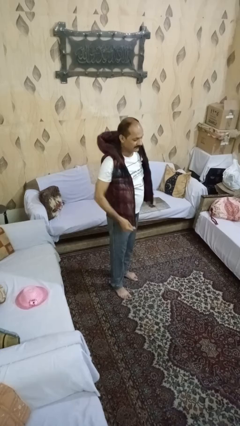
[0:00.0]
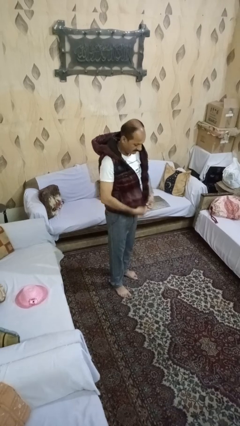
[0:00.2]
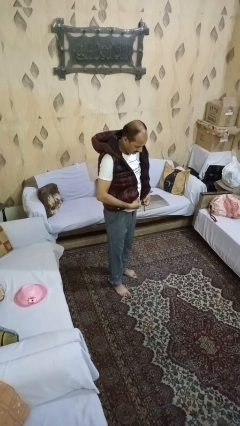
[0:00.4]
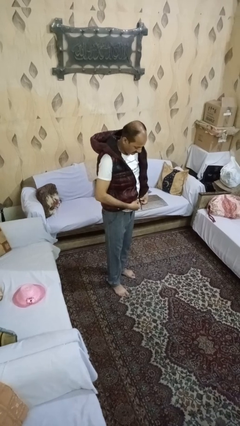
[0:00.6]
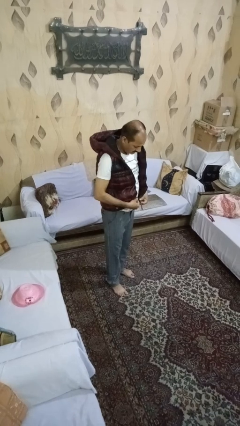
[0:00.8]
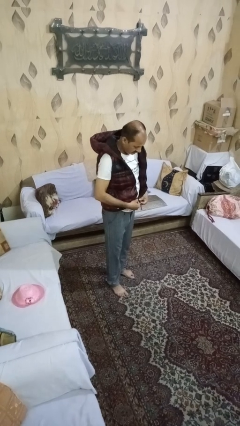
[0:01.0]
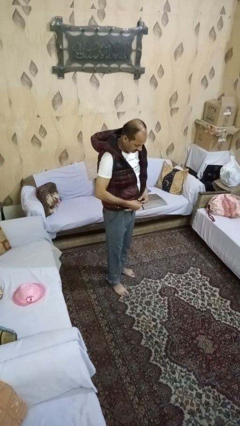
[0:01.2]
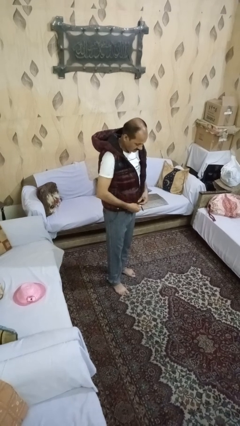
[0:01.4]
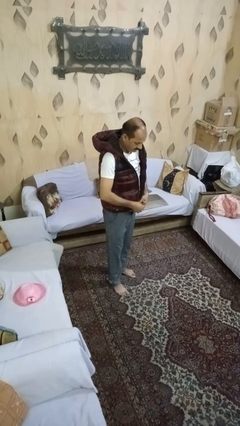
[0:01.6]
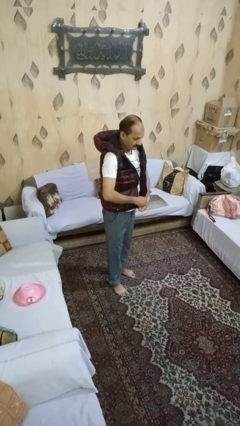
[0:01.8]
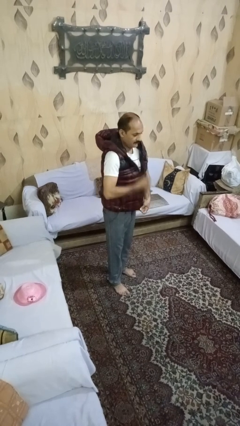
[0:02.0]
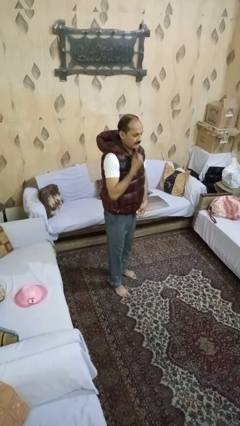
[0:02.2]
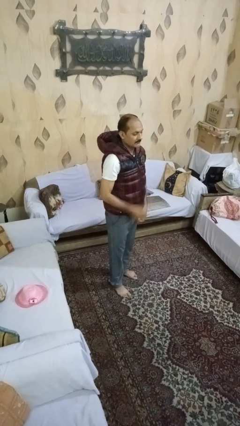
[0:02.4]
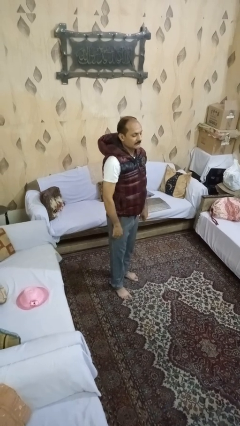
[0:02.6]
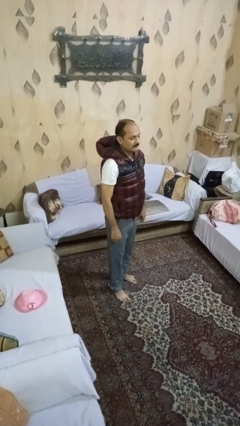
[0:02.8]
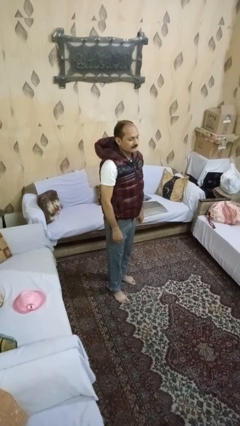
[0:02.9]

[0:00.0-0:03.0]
person zips up jacket

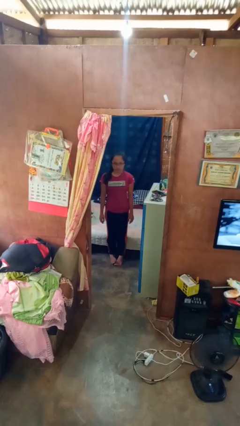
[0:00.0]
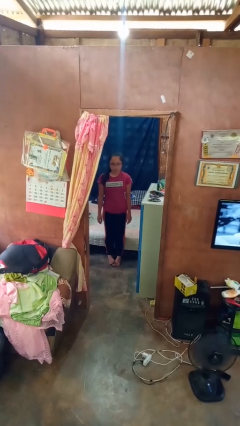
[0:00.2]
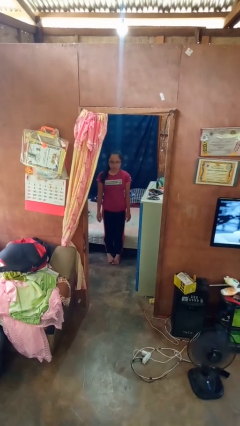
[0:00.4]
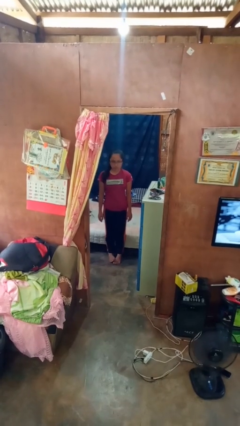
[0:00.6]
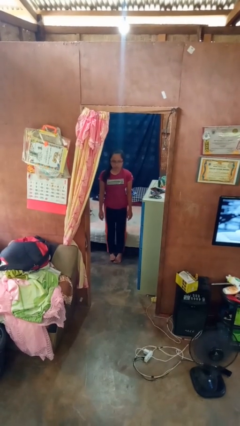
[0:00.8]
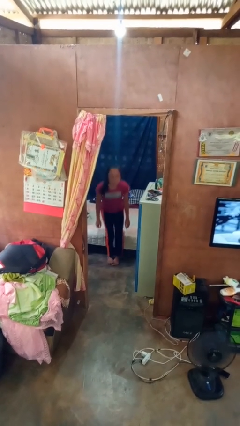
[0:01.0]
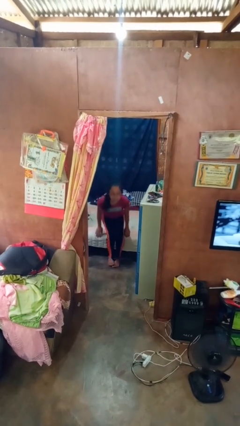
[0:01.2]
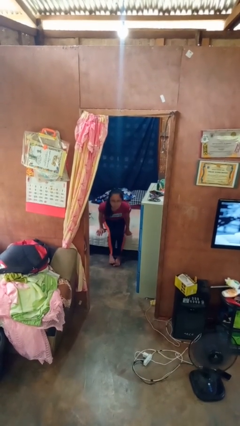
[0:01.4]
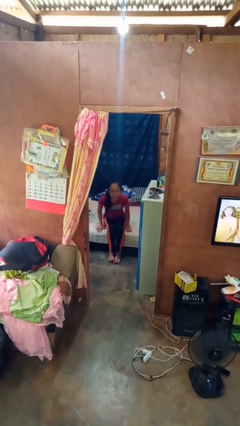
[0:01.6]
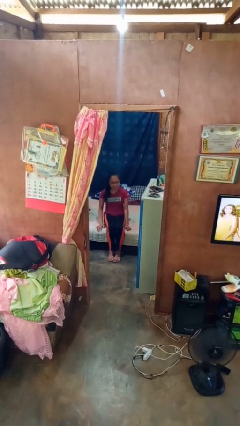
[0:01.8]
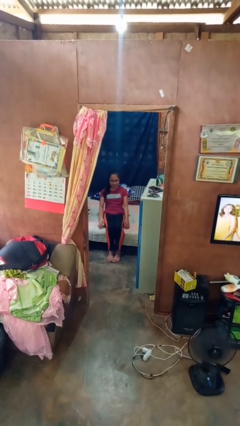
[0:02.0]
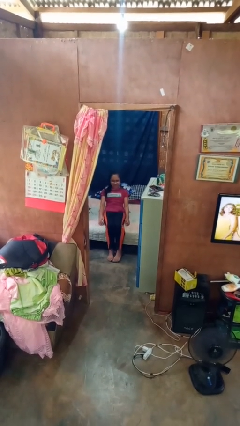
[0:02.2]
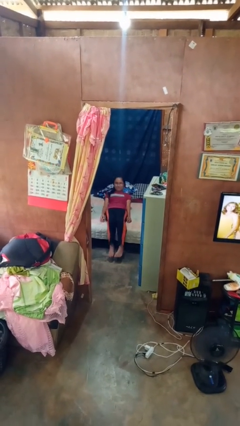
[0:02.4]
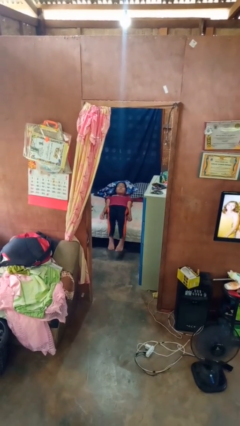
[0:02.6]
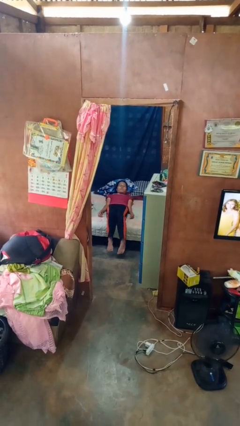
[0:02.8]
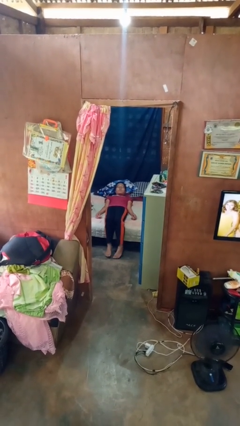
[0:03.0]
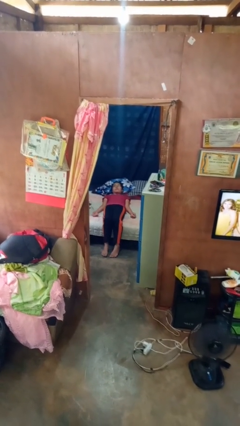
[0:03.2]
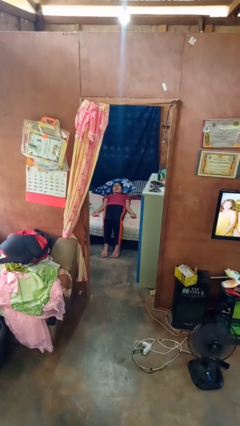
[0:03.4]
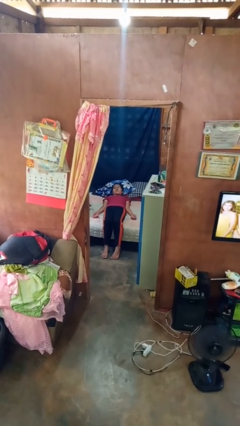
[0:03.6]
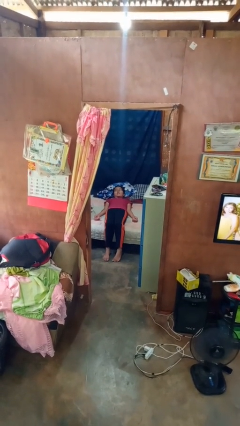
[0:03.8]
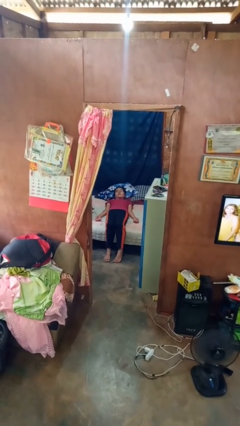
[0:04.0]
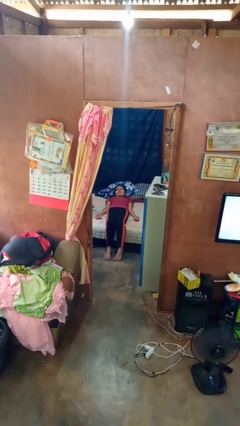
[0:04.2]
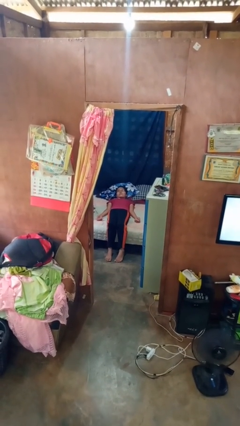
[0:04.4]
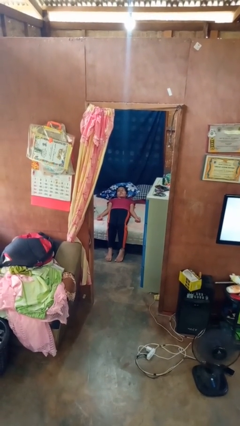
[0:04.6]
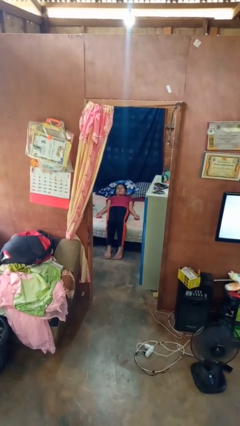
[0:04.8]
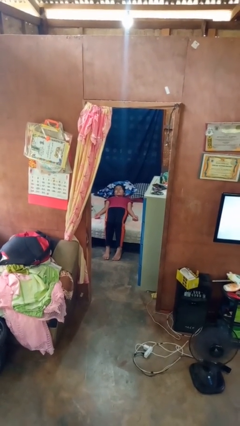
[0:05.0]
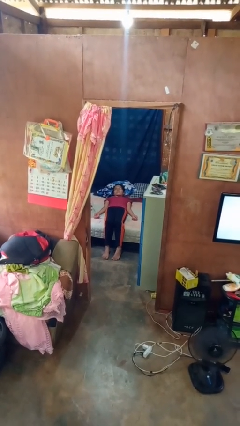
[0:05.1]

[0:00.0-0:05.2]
person lies down on bed

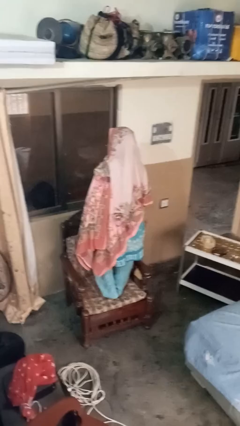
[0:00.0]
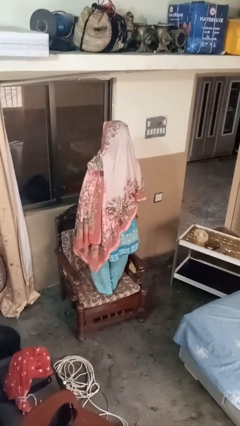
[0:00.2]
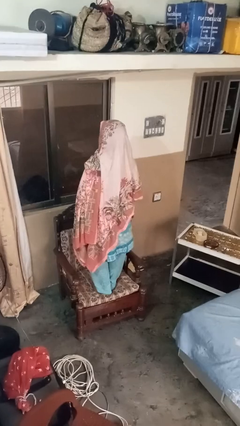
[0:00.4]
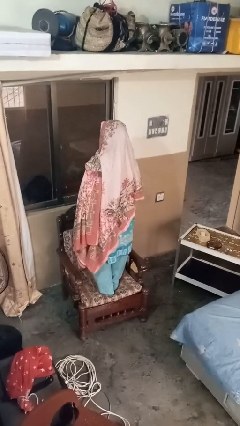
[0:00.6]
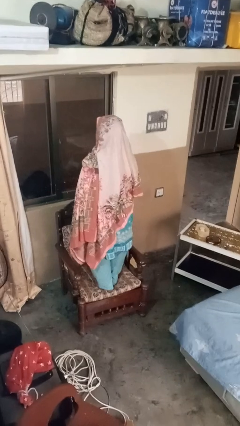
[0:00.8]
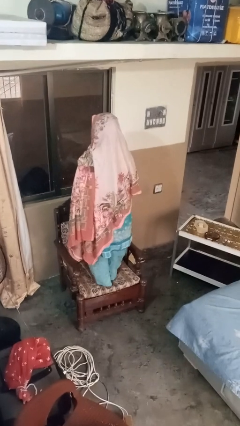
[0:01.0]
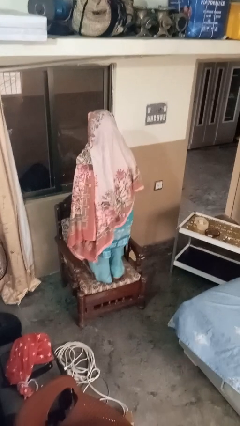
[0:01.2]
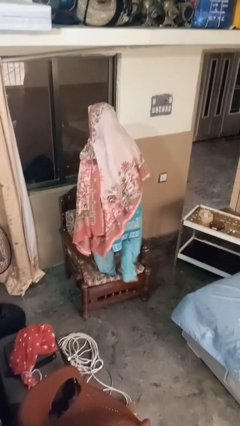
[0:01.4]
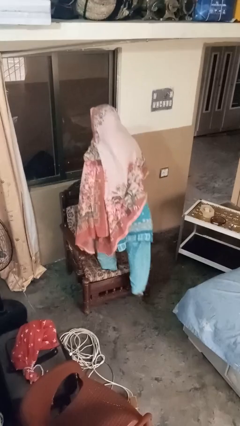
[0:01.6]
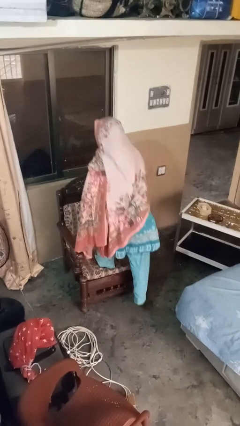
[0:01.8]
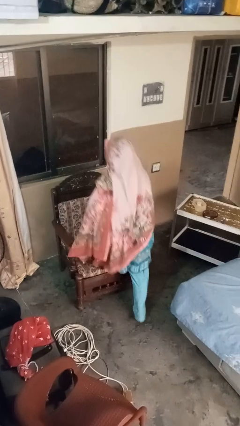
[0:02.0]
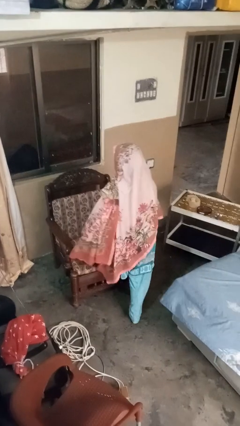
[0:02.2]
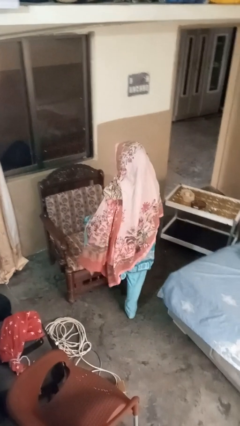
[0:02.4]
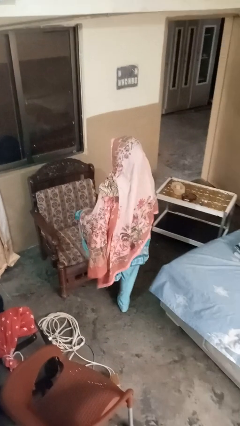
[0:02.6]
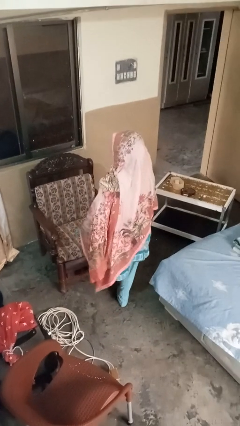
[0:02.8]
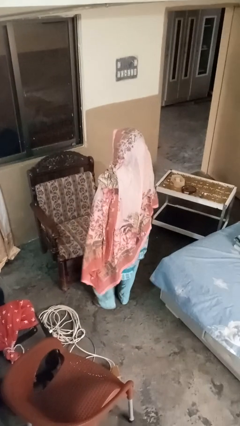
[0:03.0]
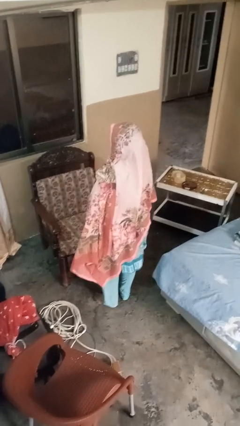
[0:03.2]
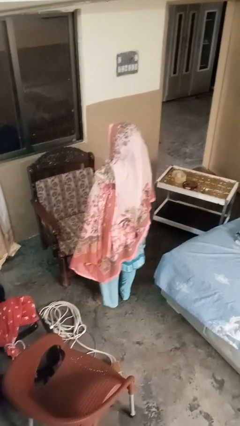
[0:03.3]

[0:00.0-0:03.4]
person climbs off couch

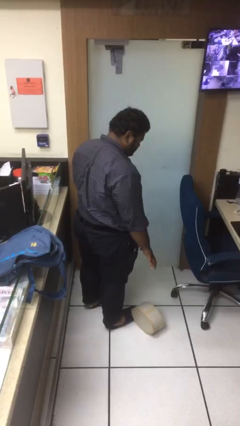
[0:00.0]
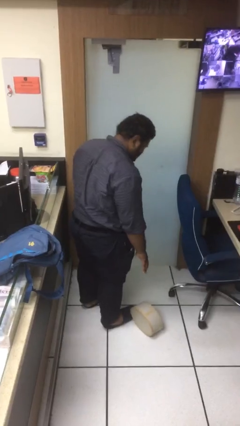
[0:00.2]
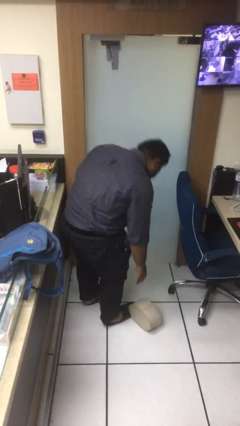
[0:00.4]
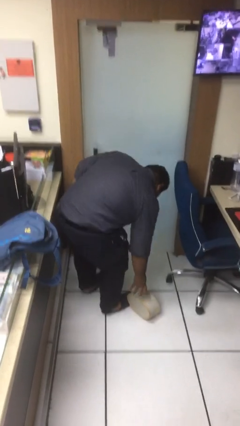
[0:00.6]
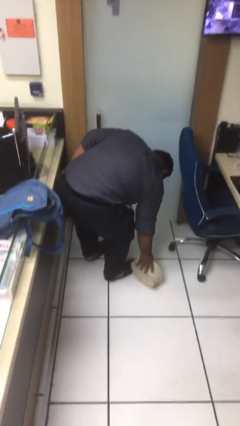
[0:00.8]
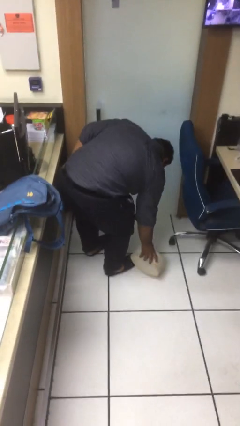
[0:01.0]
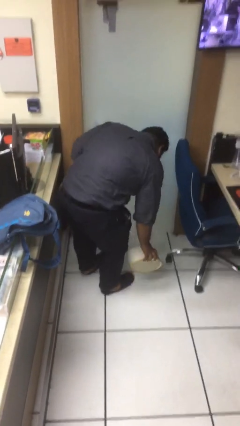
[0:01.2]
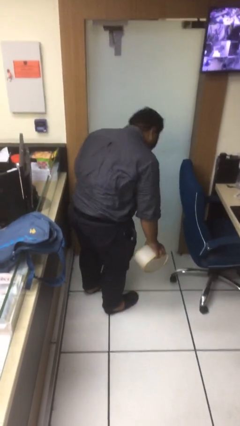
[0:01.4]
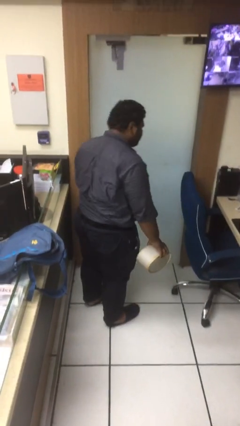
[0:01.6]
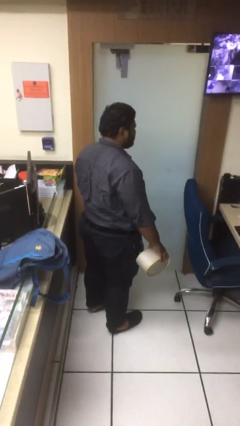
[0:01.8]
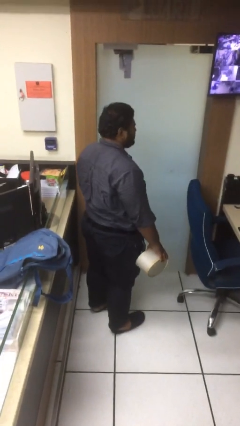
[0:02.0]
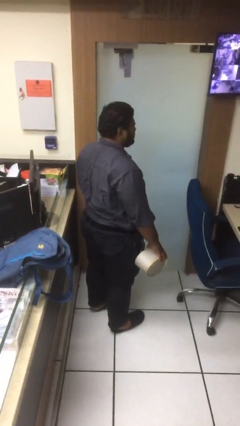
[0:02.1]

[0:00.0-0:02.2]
person picks up object from floor

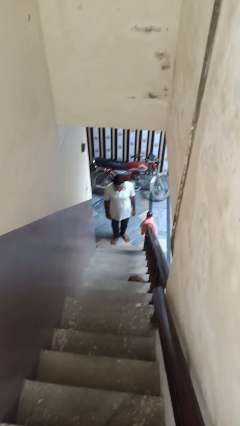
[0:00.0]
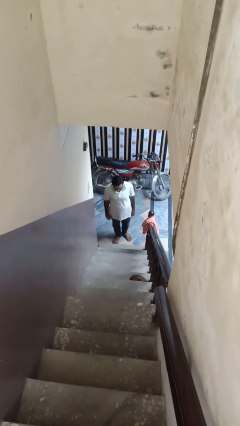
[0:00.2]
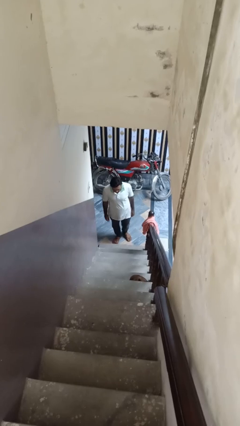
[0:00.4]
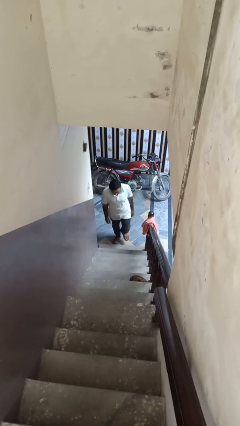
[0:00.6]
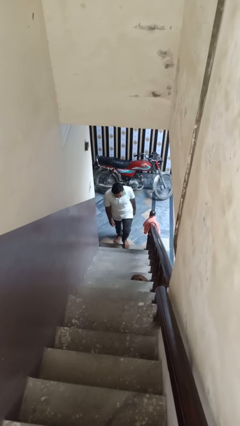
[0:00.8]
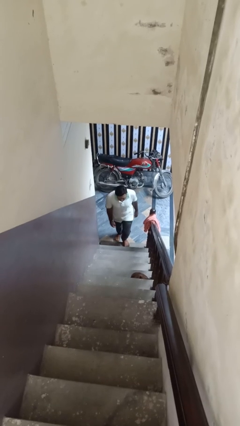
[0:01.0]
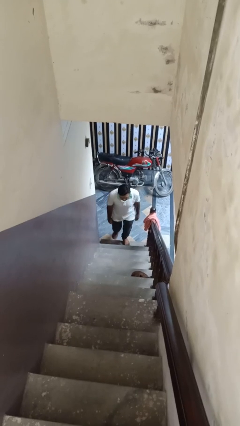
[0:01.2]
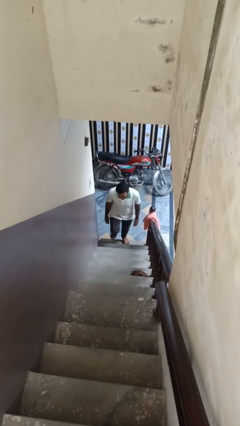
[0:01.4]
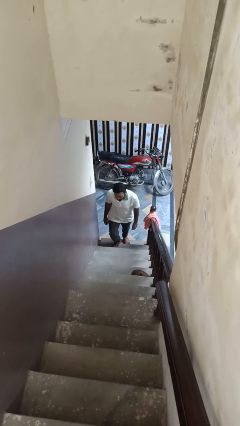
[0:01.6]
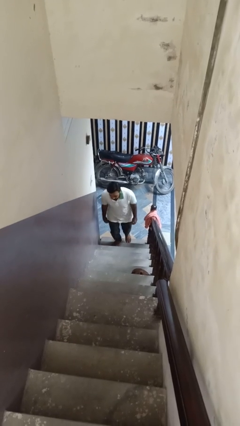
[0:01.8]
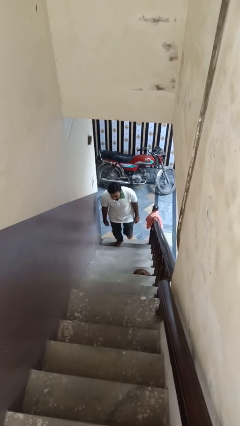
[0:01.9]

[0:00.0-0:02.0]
person climbs up ladder

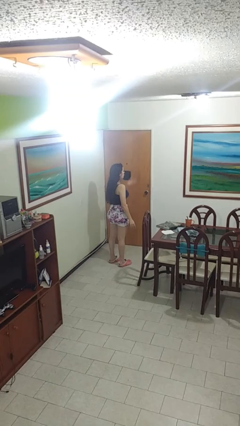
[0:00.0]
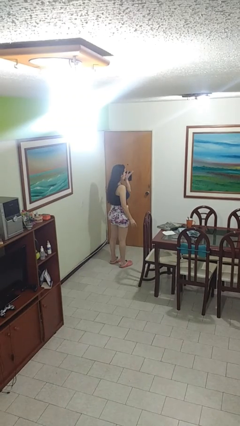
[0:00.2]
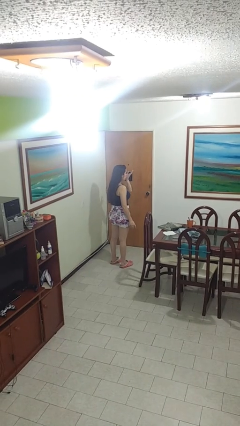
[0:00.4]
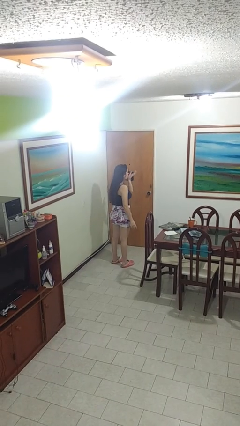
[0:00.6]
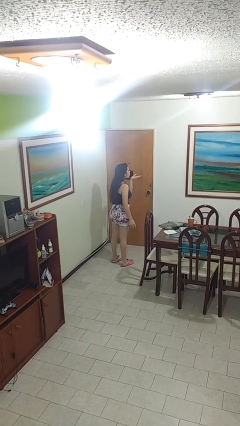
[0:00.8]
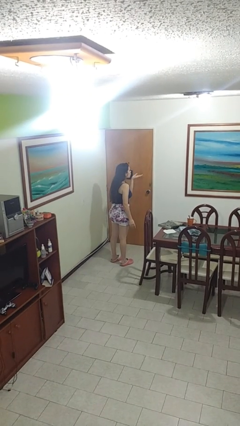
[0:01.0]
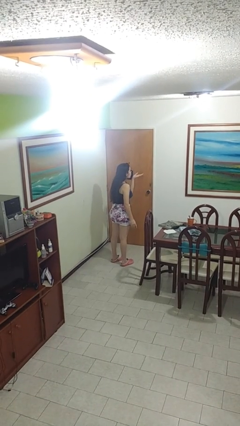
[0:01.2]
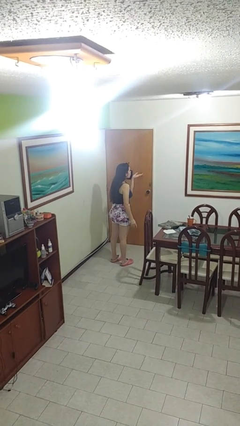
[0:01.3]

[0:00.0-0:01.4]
person gestures blow kiss
